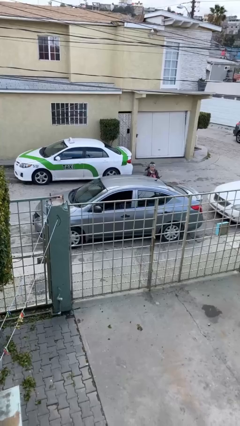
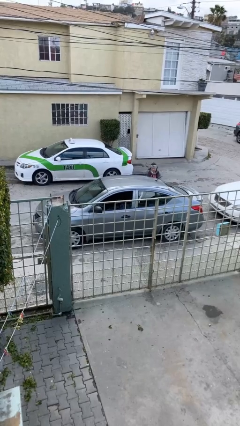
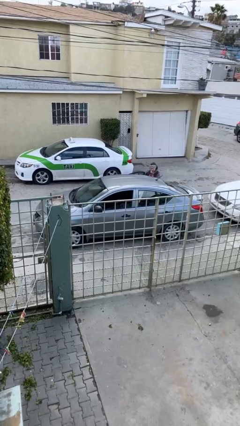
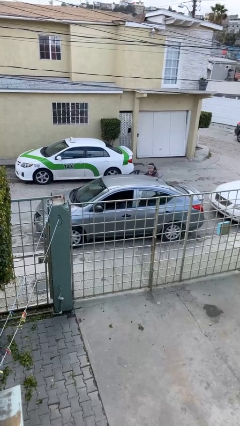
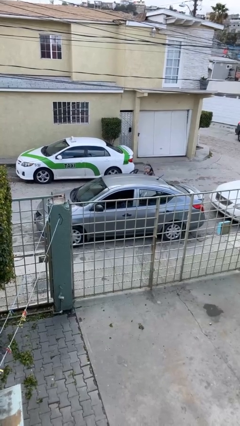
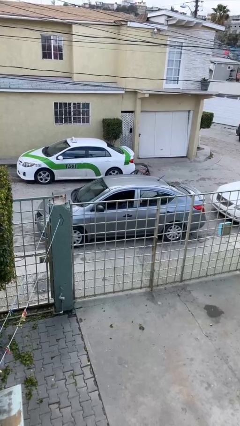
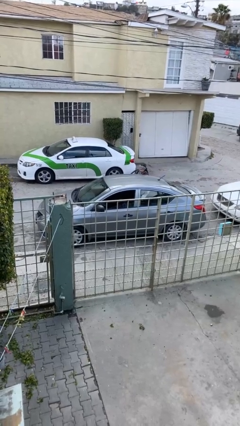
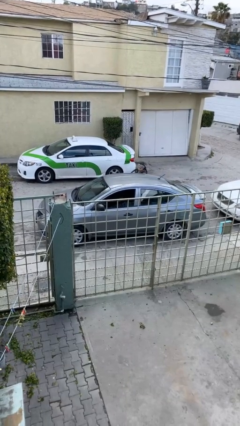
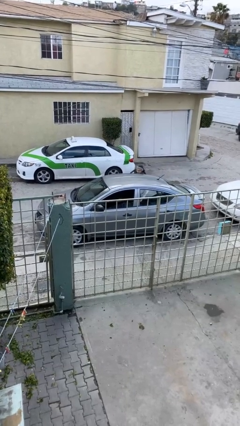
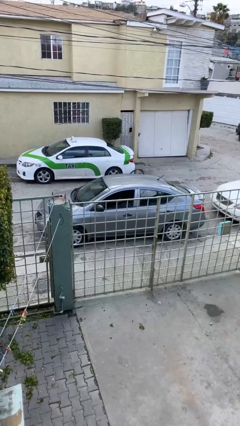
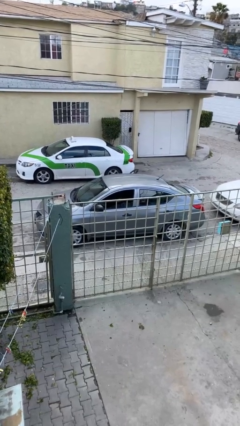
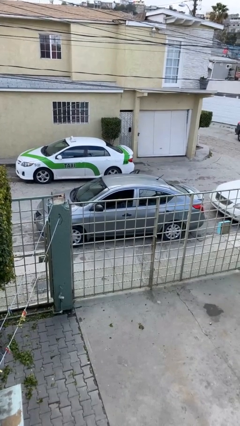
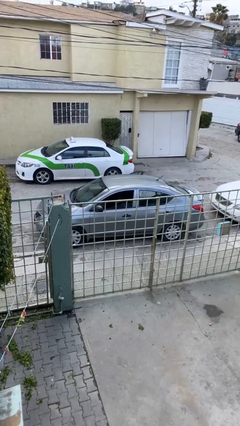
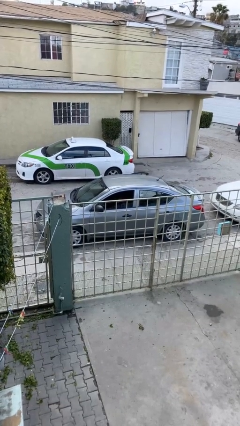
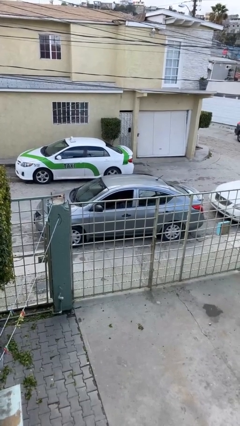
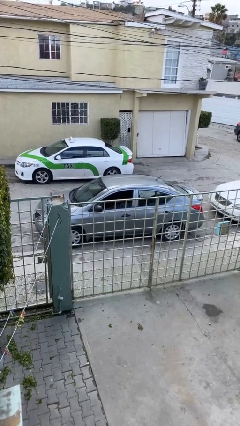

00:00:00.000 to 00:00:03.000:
car picks up person

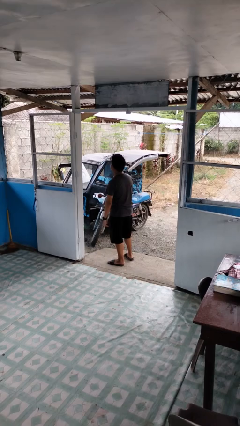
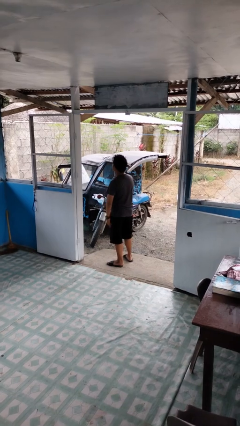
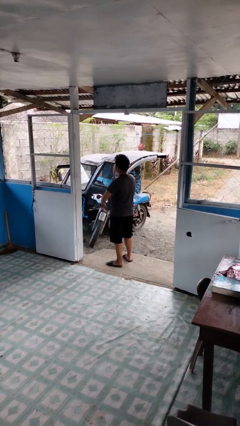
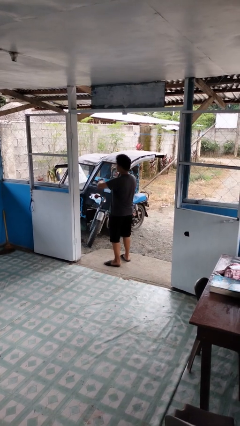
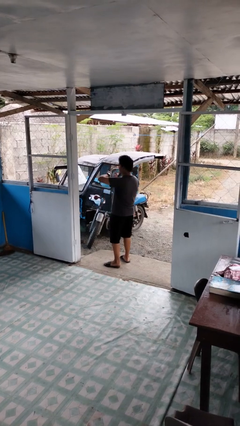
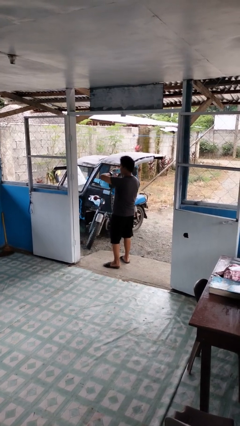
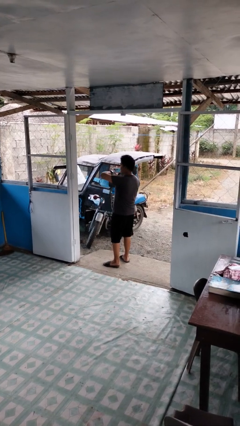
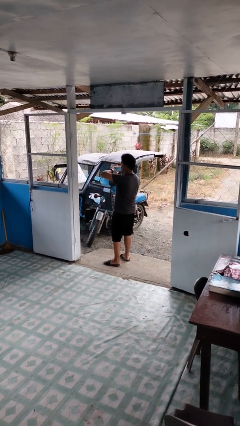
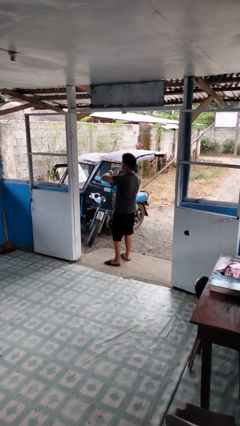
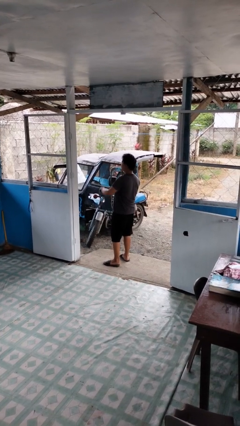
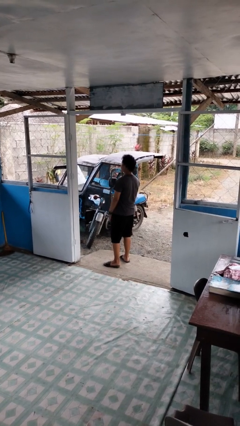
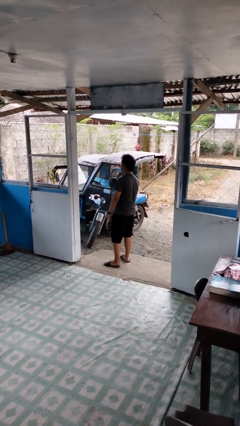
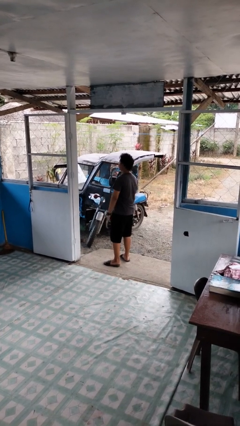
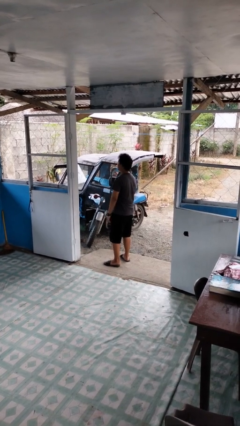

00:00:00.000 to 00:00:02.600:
person looks at wristwatch

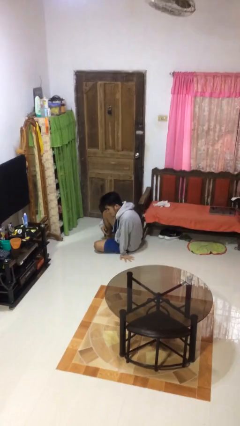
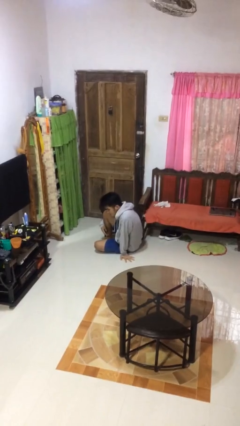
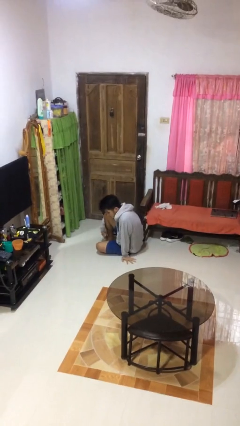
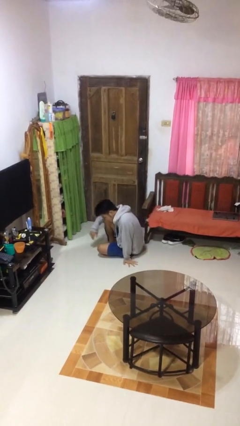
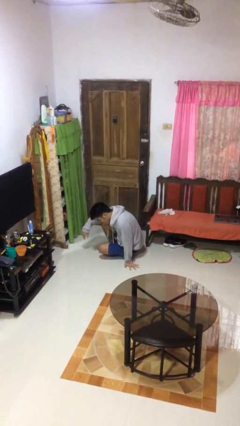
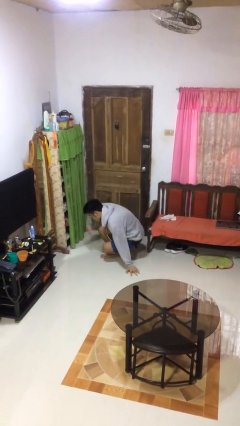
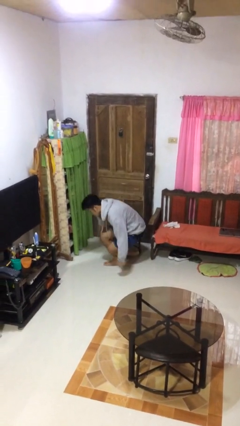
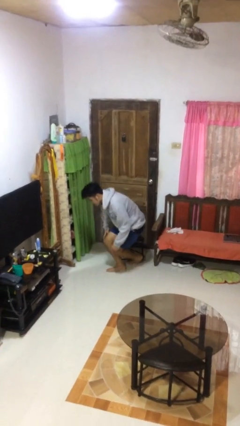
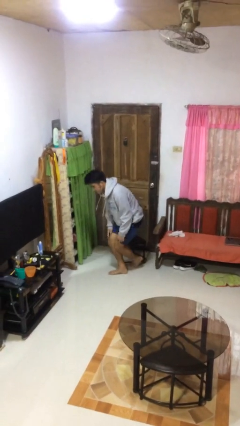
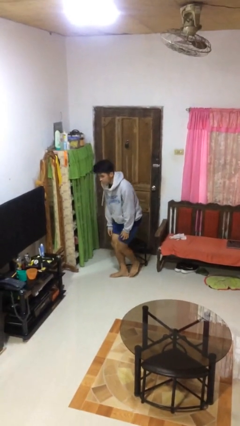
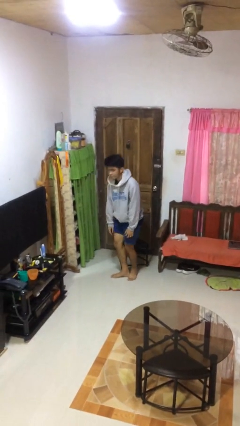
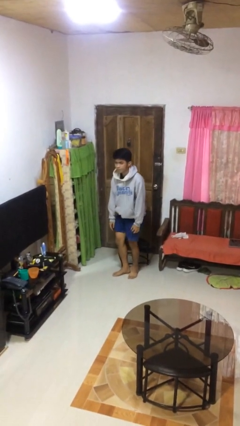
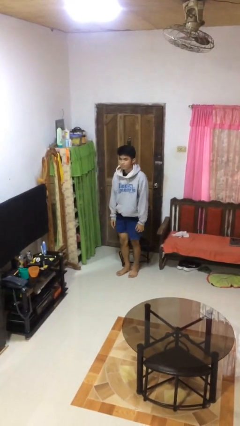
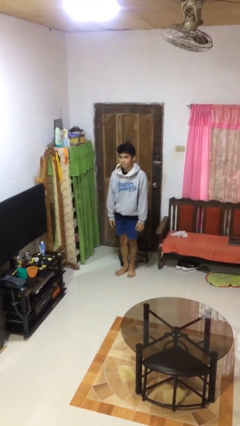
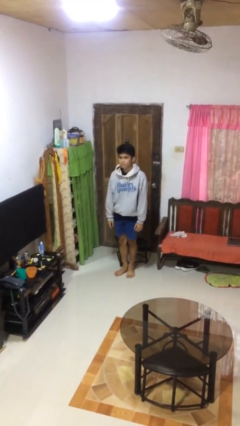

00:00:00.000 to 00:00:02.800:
person stands up from floor

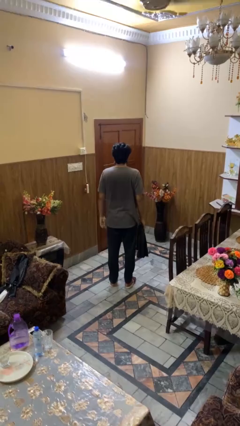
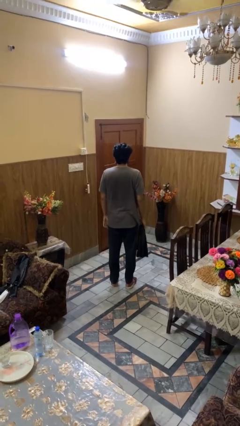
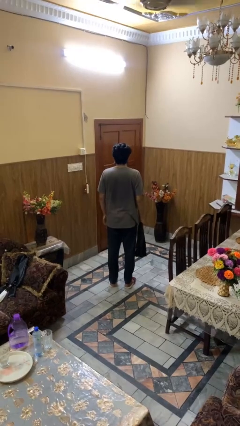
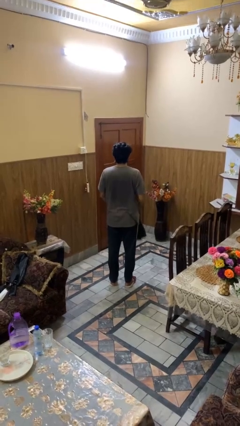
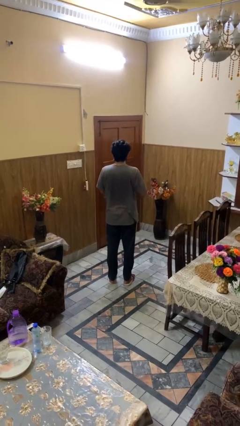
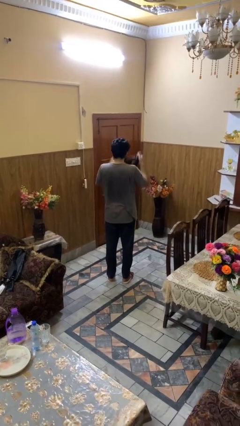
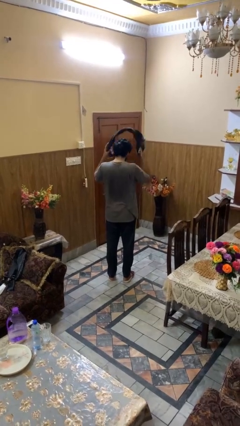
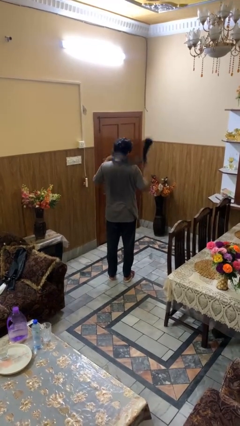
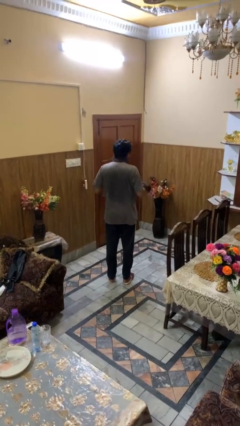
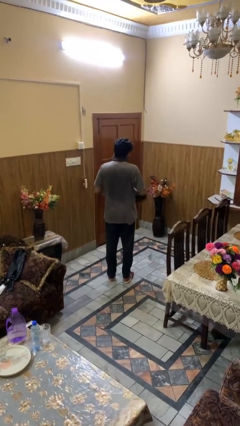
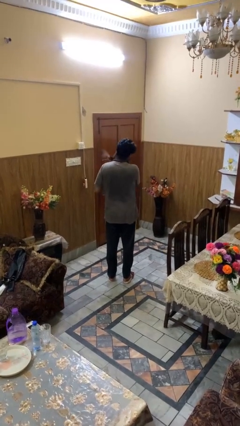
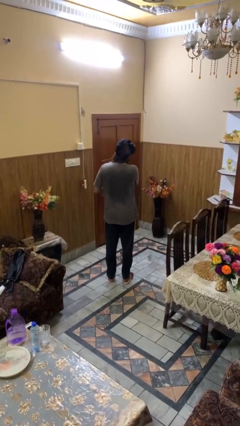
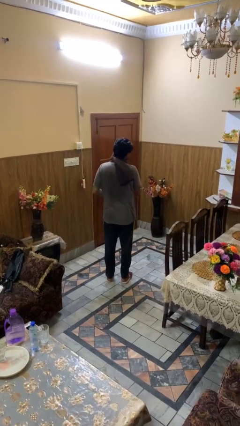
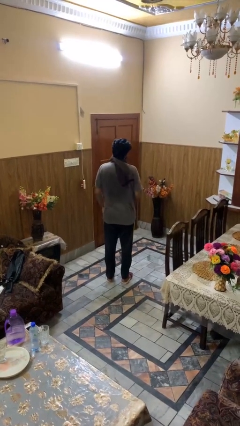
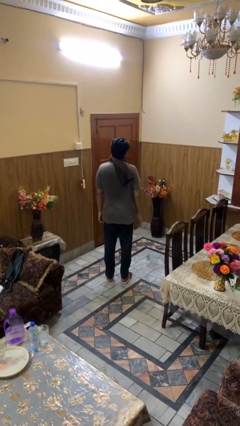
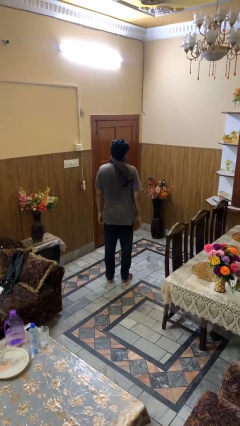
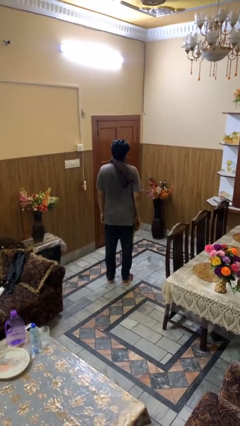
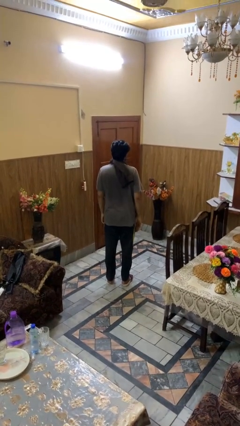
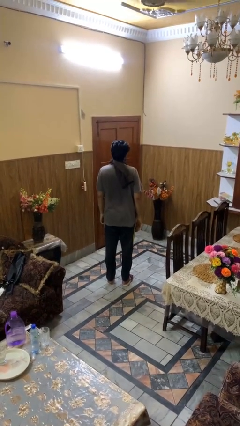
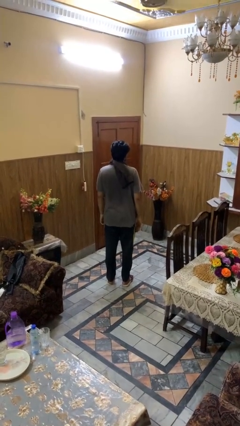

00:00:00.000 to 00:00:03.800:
person puts on scarf

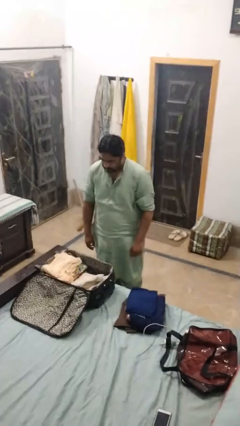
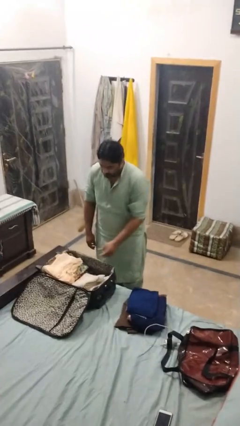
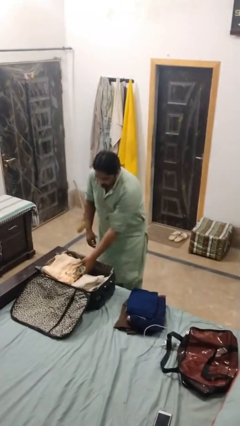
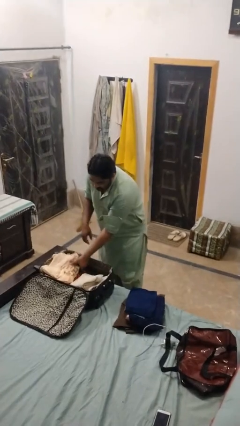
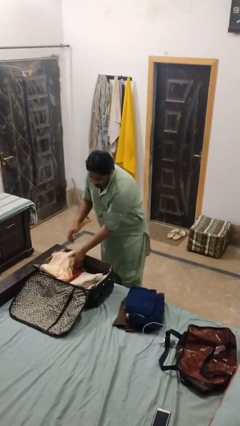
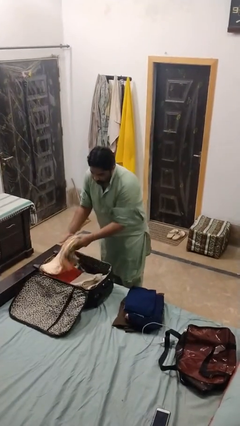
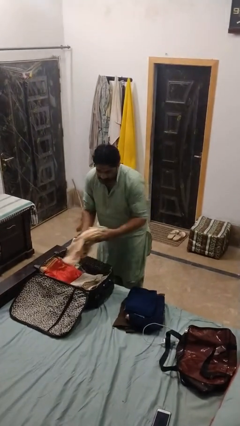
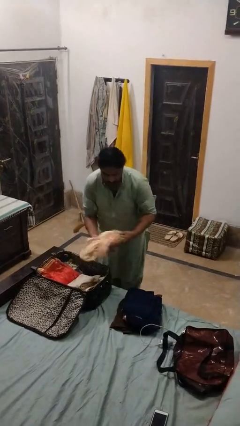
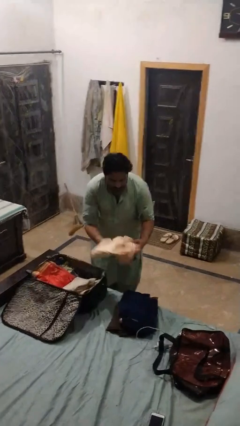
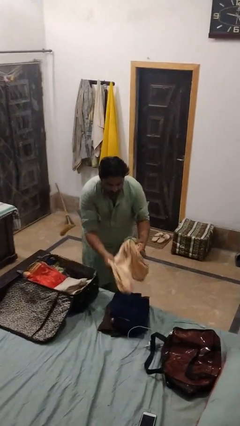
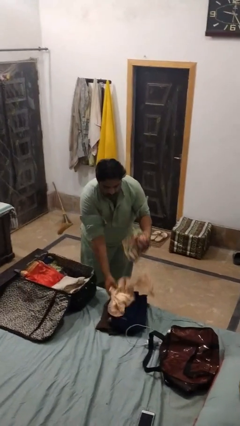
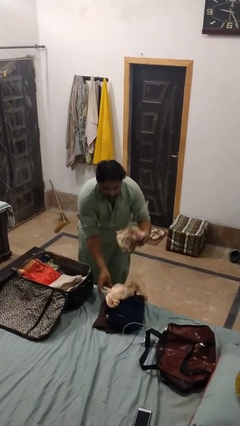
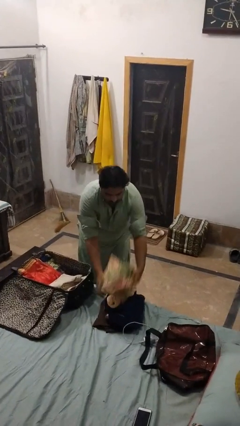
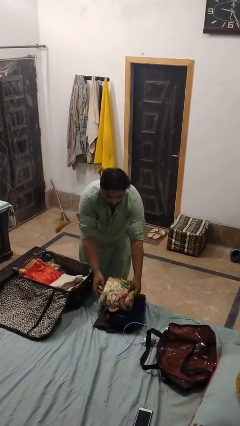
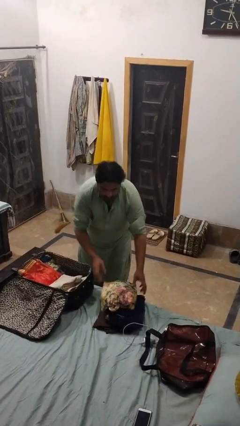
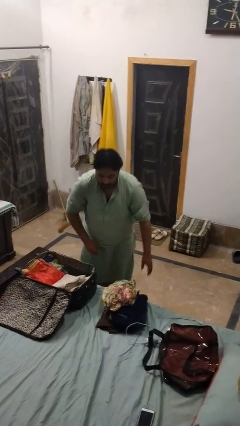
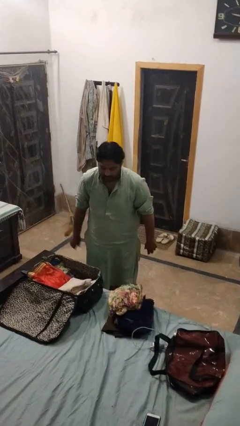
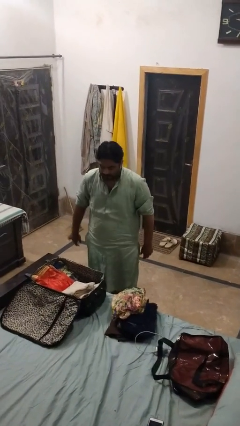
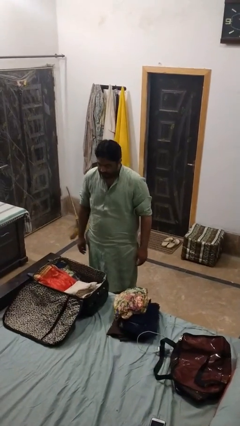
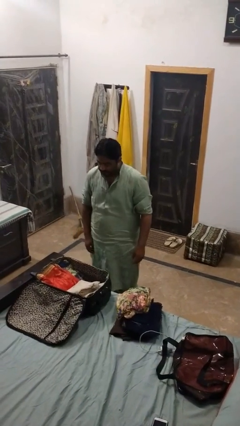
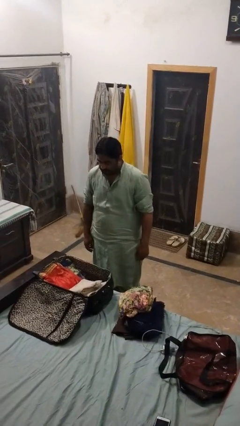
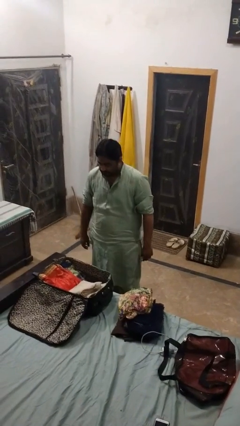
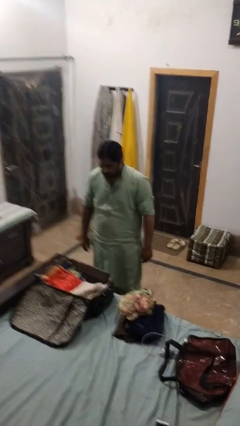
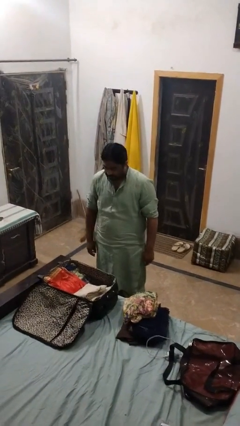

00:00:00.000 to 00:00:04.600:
person unloads clothes from suitcase
